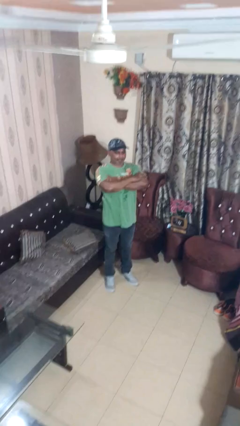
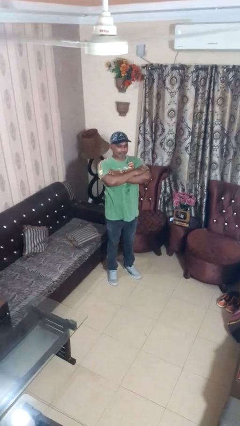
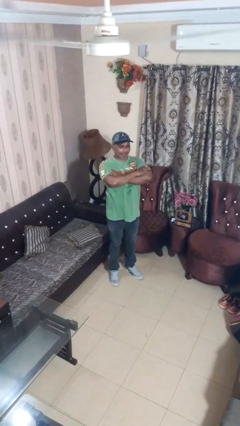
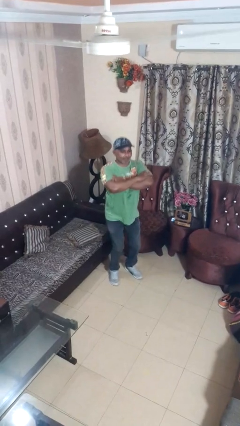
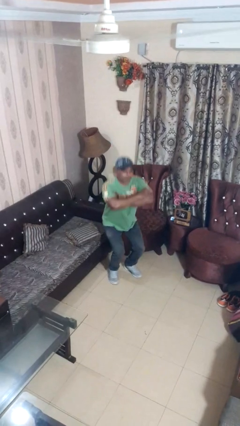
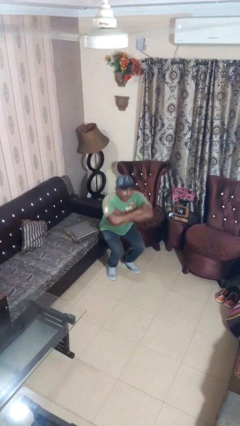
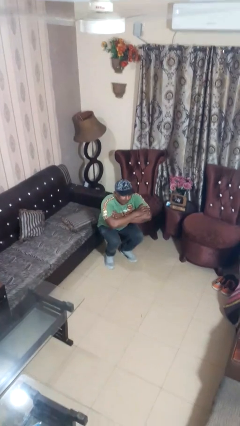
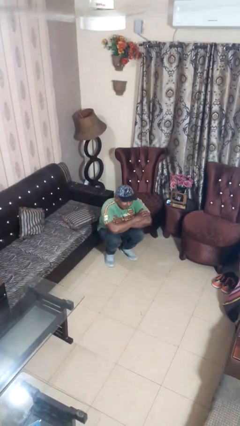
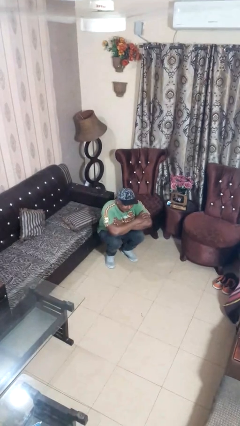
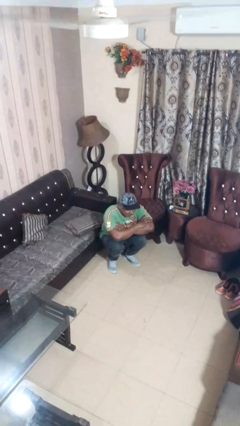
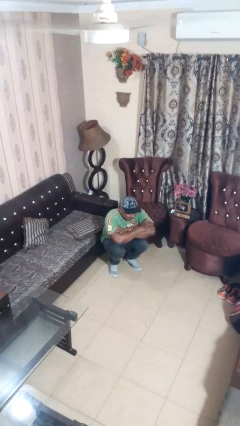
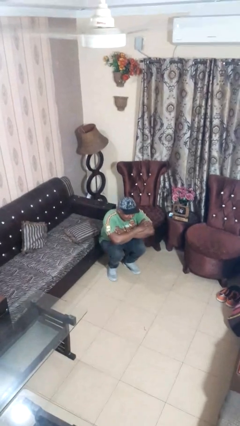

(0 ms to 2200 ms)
person squats

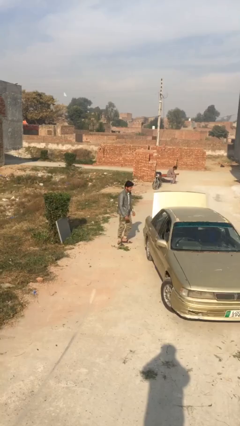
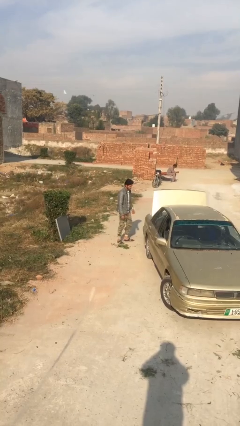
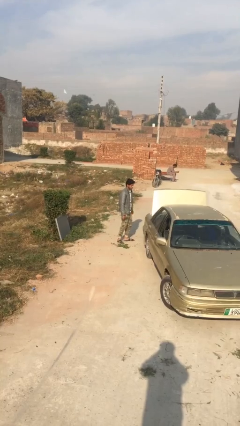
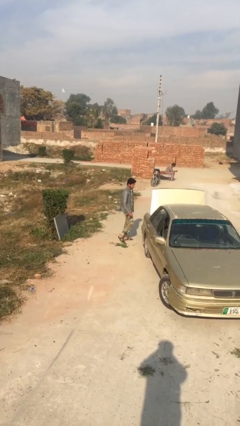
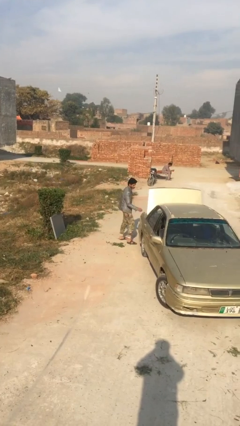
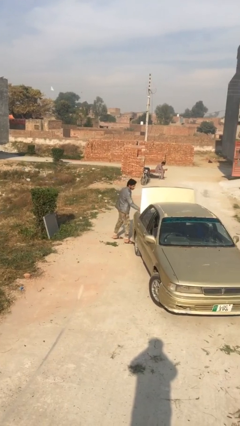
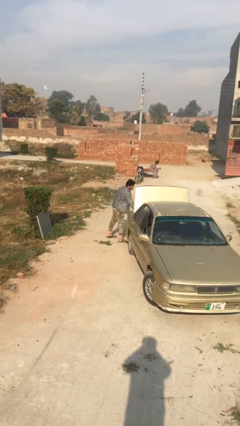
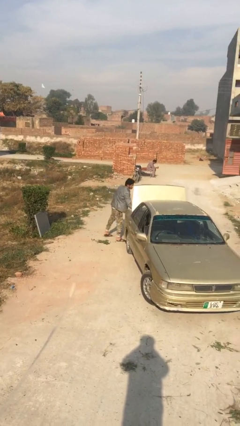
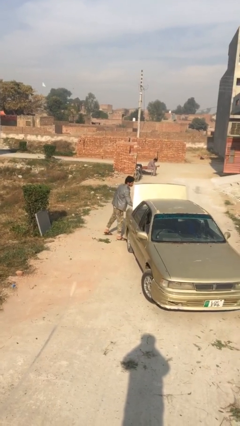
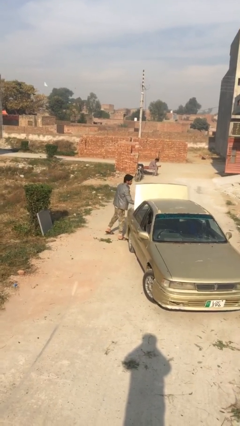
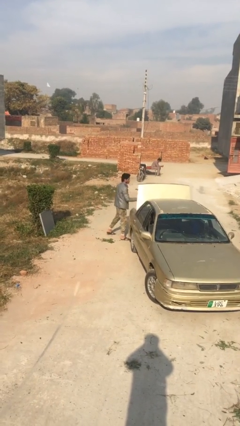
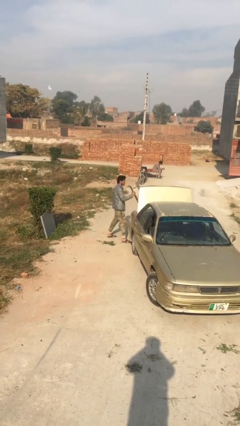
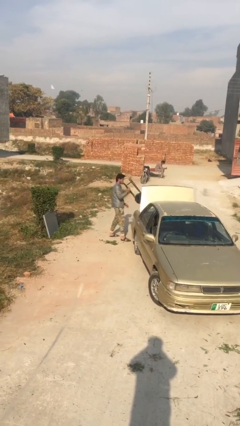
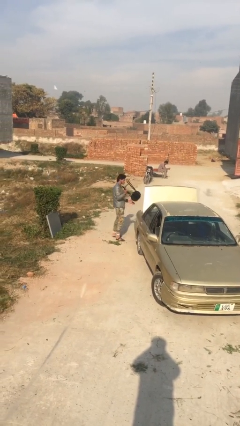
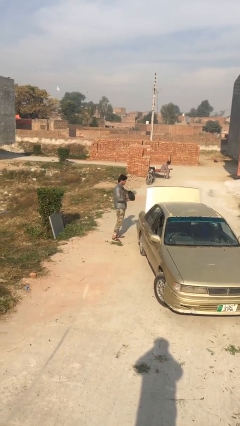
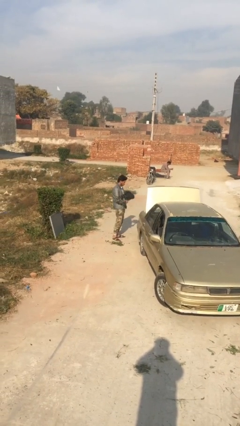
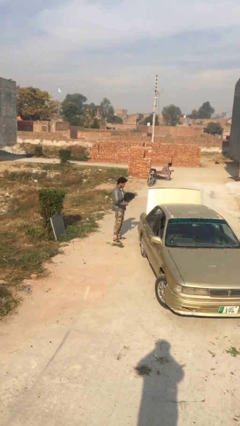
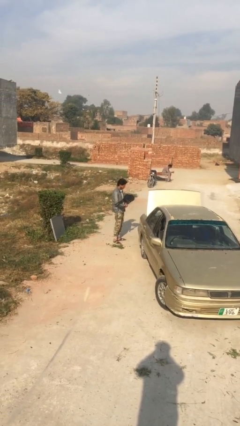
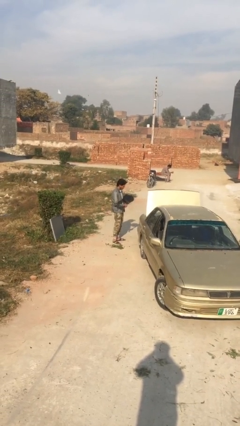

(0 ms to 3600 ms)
person unloads car

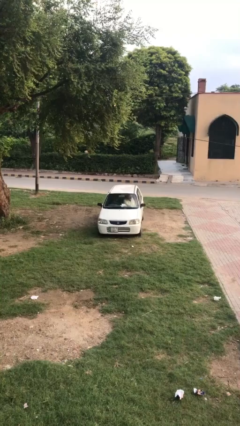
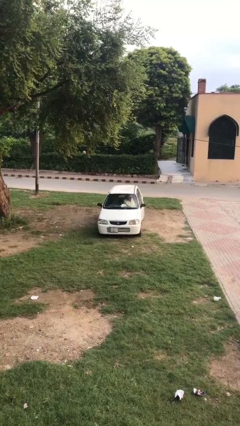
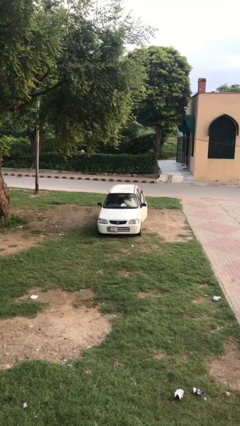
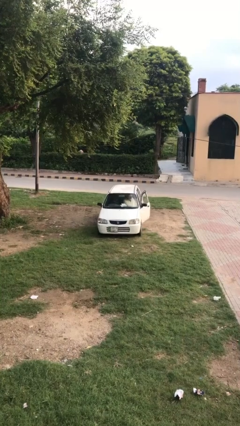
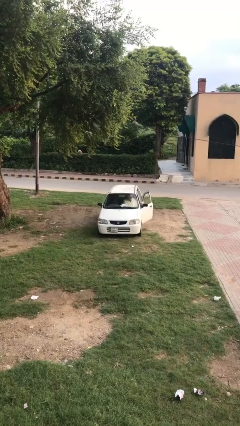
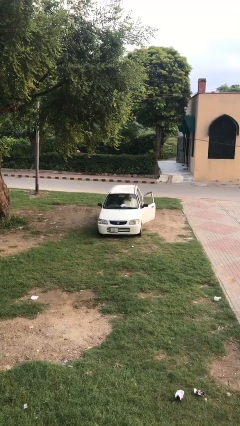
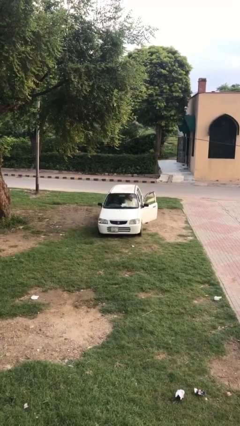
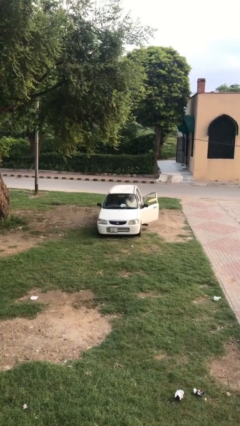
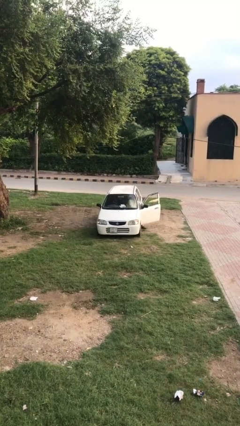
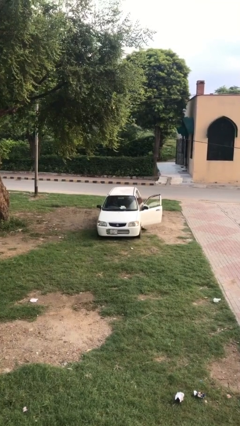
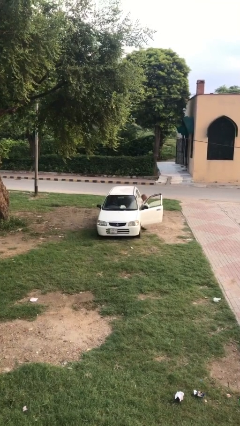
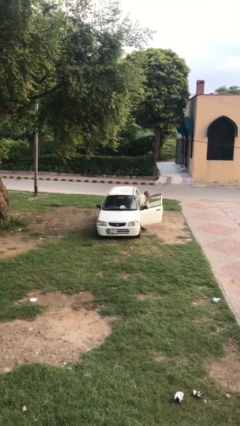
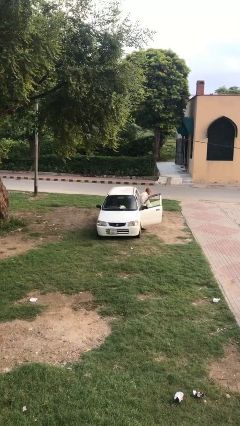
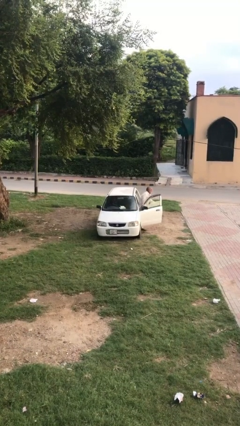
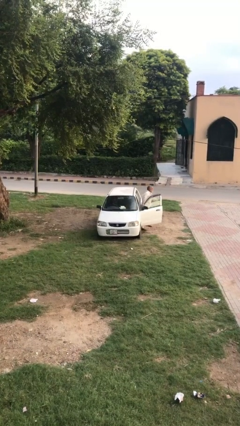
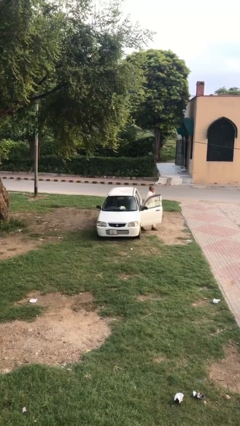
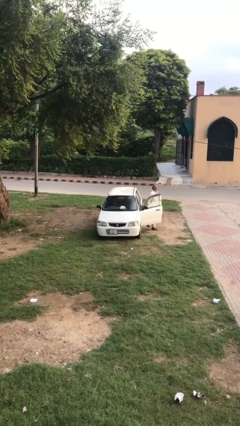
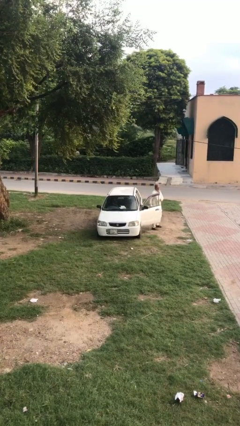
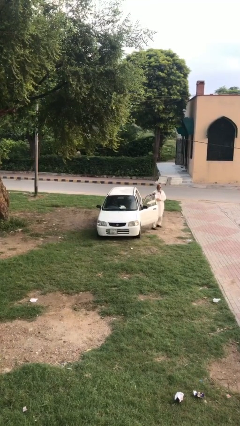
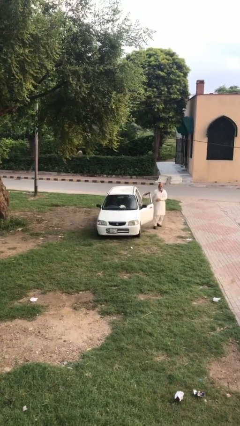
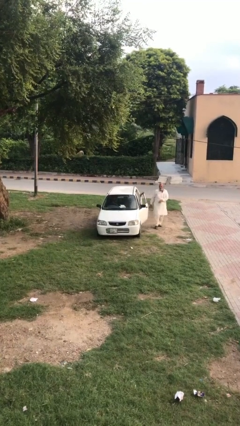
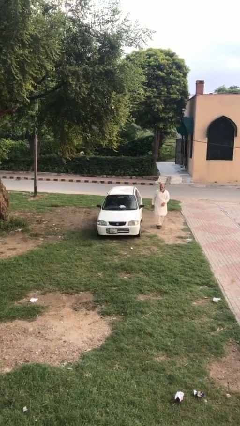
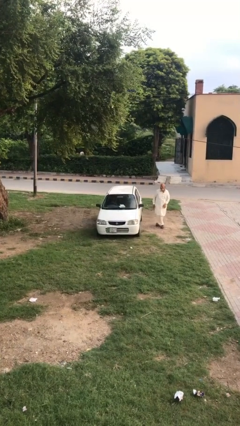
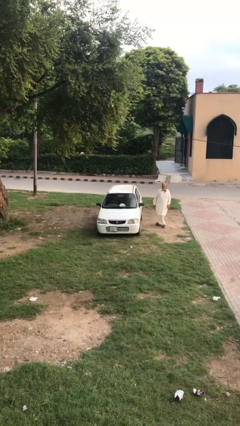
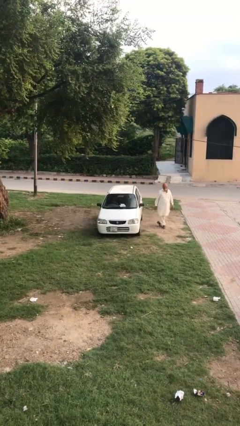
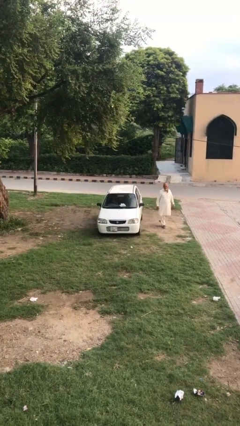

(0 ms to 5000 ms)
car drops off person

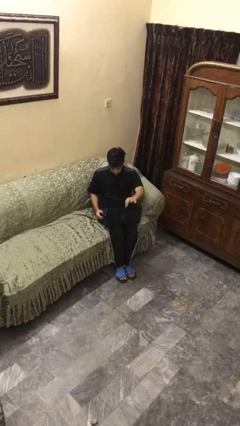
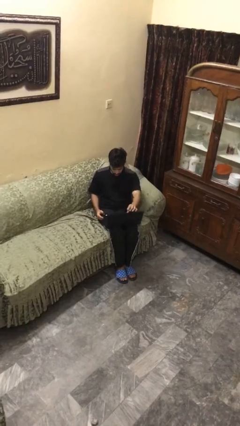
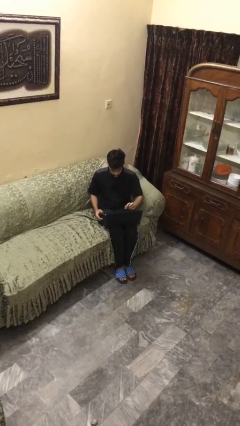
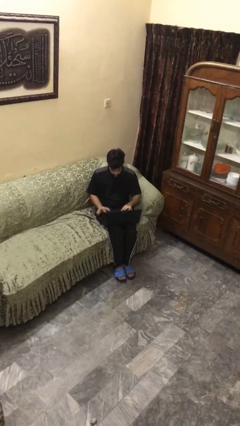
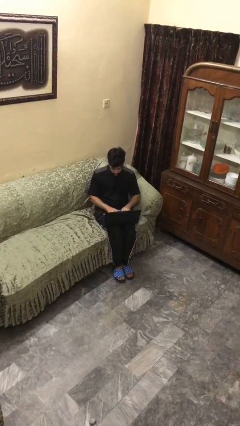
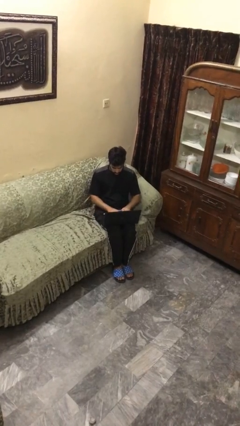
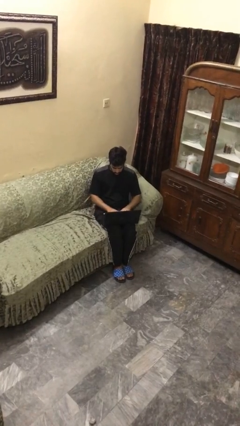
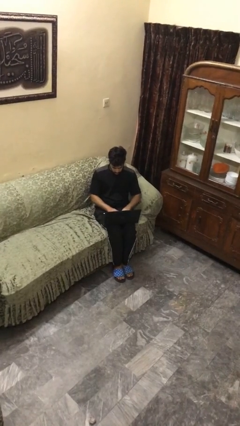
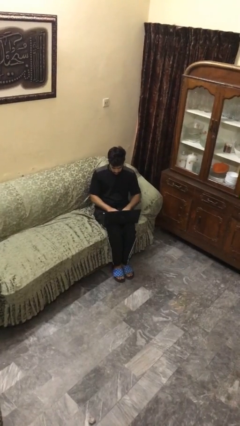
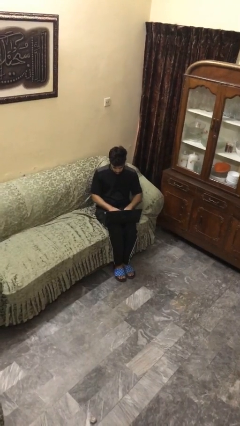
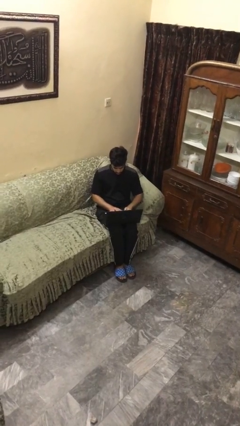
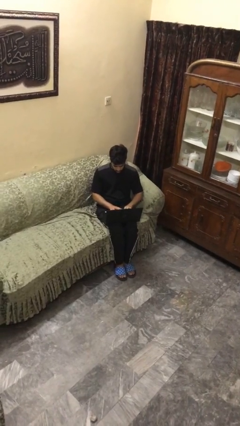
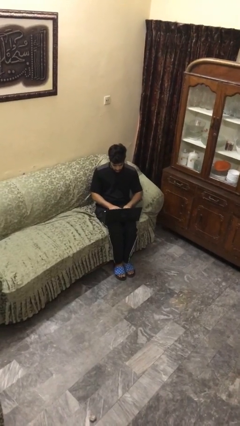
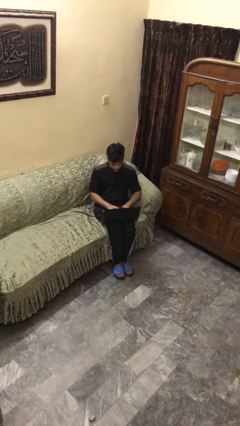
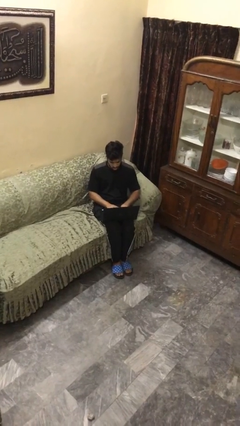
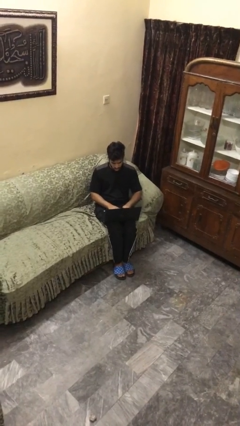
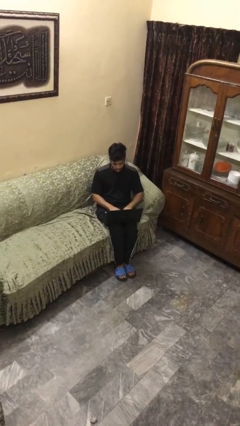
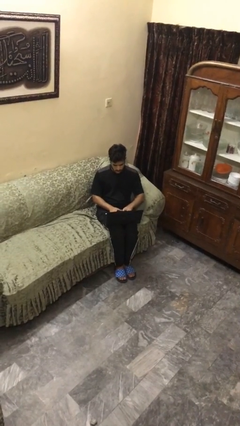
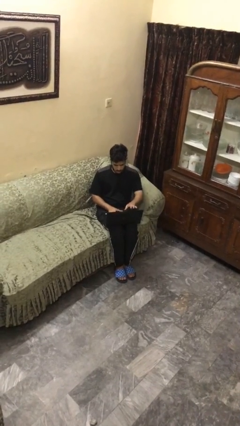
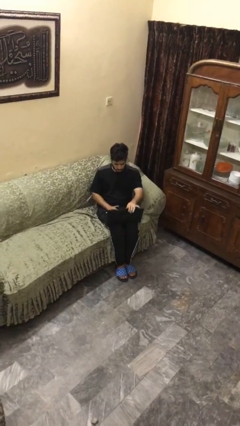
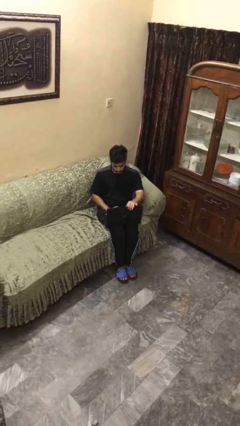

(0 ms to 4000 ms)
person interacts with laptop

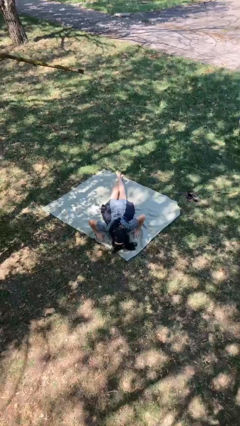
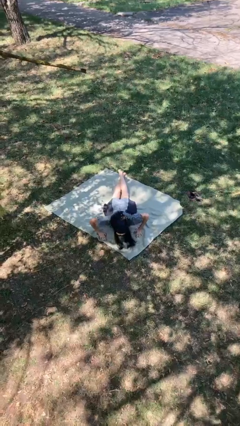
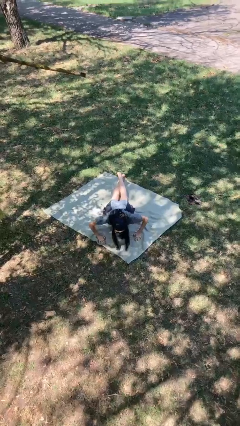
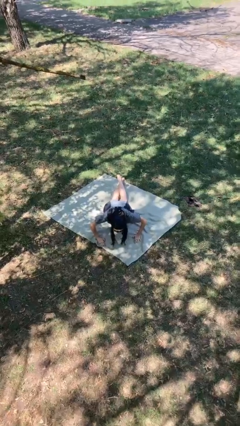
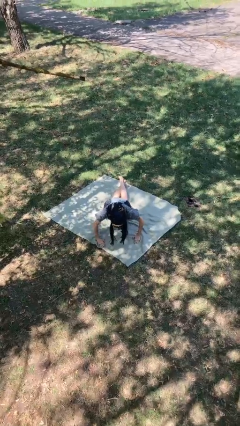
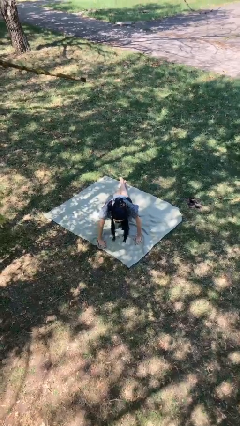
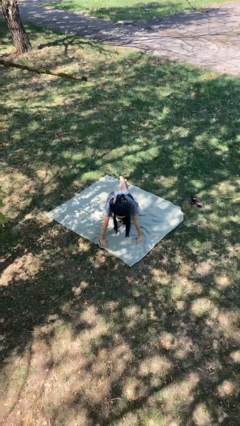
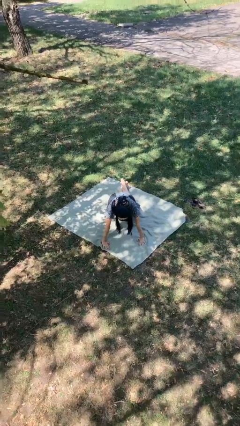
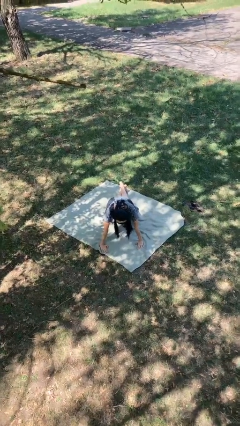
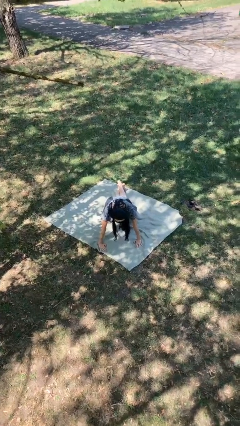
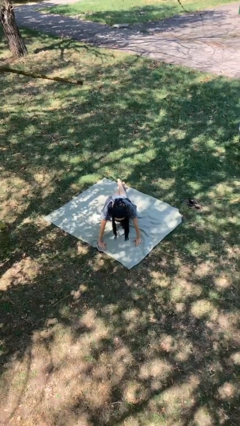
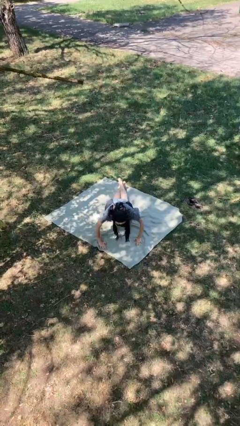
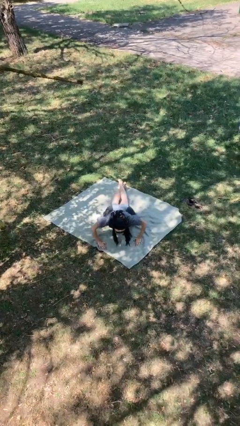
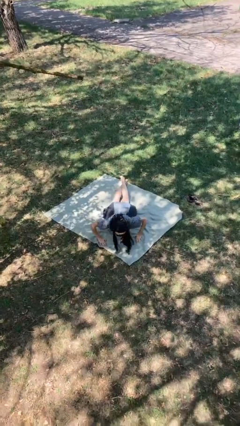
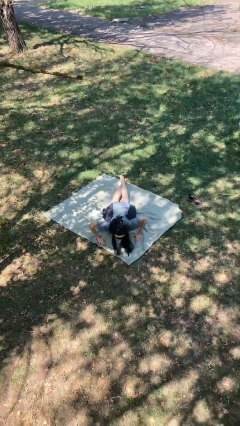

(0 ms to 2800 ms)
person exercises with pushup

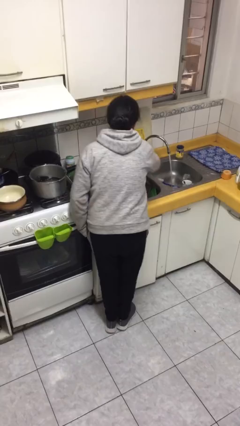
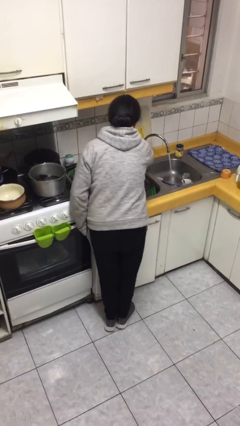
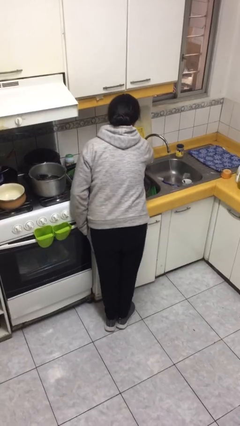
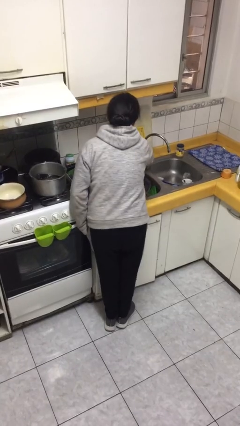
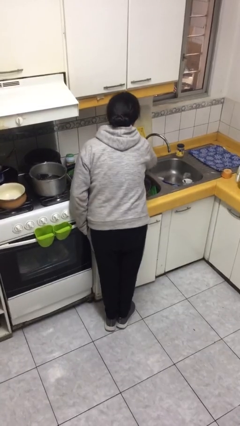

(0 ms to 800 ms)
person turns off faucet
